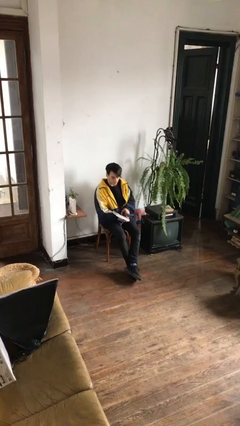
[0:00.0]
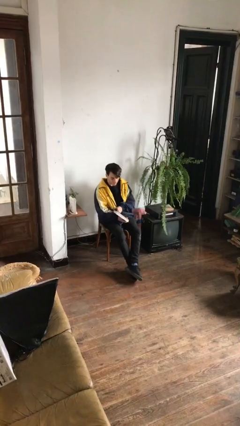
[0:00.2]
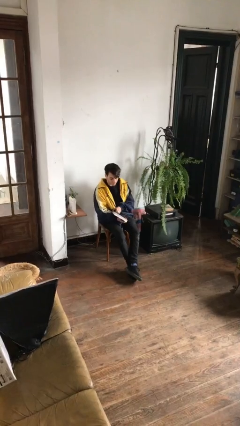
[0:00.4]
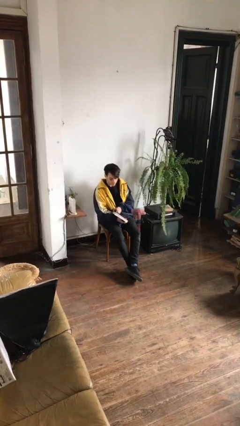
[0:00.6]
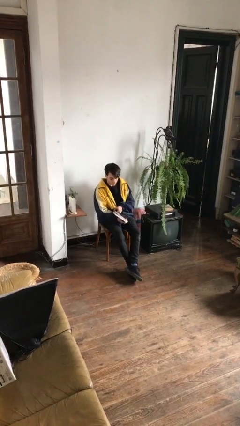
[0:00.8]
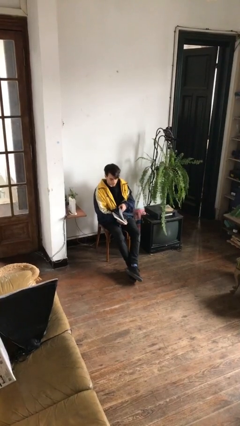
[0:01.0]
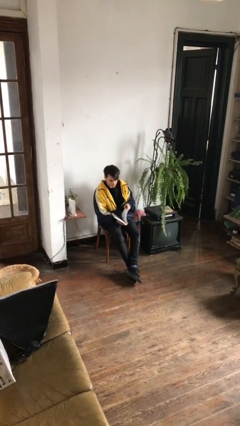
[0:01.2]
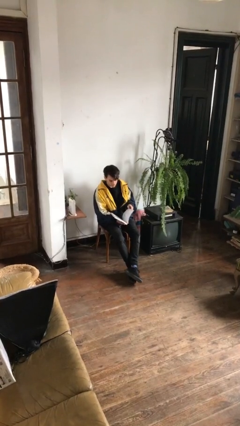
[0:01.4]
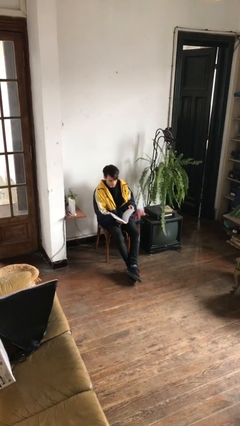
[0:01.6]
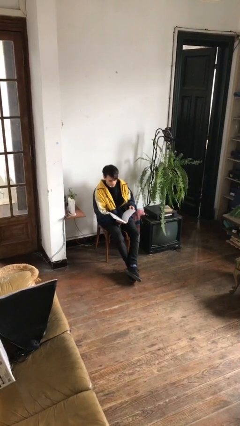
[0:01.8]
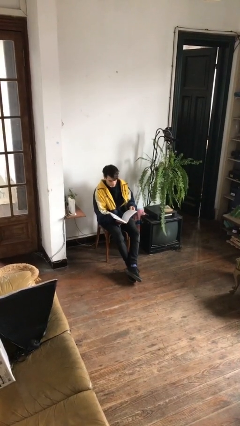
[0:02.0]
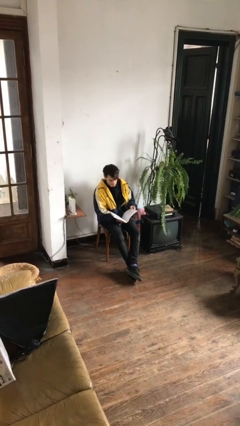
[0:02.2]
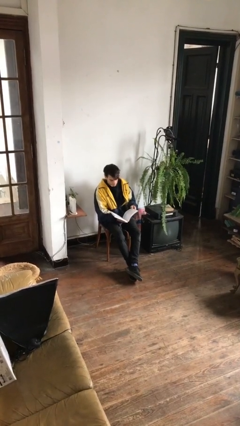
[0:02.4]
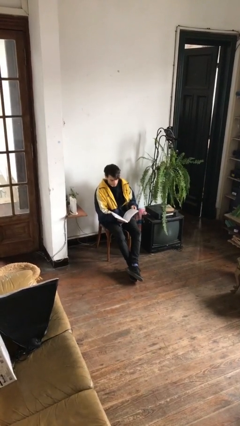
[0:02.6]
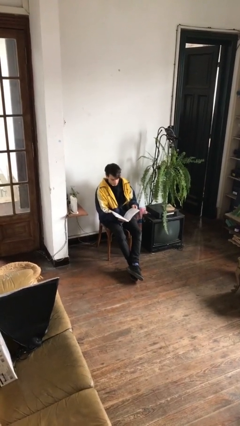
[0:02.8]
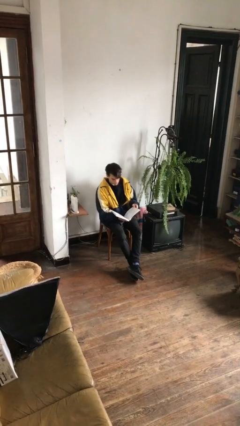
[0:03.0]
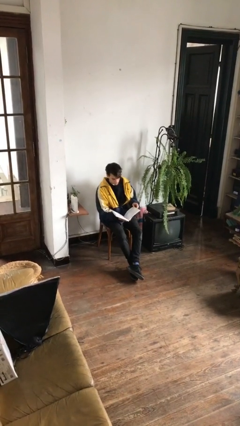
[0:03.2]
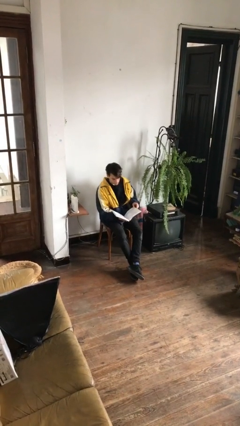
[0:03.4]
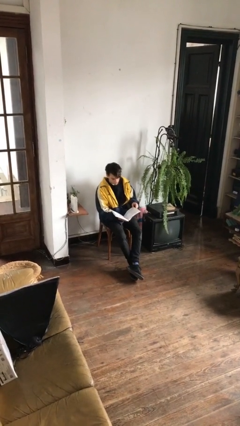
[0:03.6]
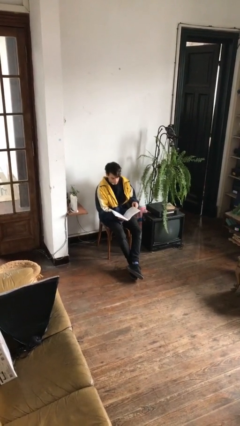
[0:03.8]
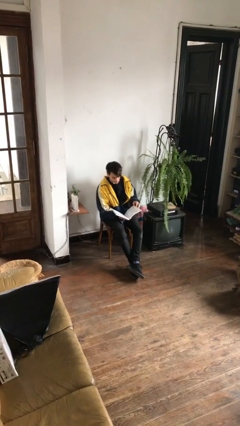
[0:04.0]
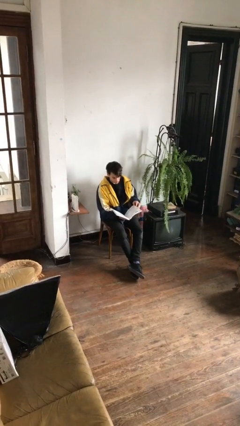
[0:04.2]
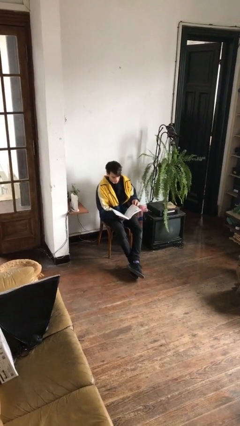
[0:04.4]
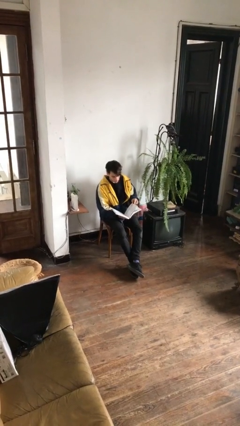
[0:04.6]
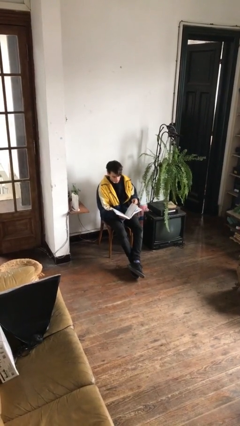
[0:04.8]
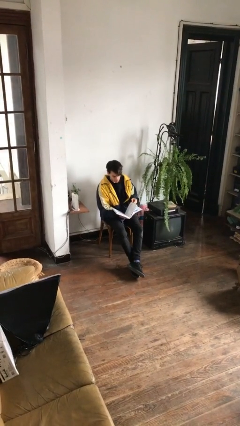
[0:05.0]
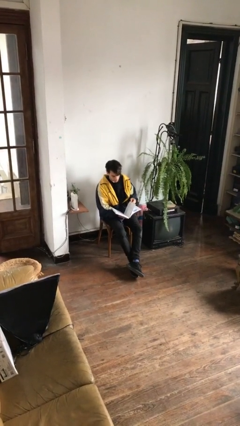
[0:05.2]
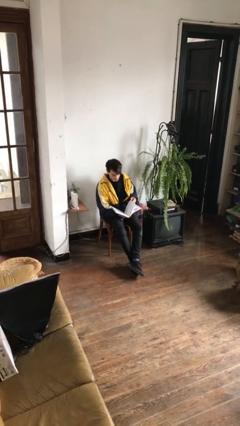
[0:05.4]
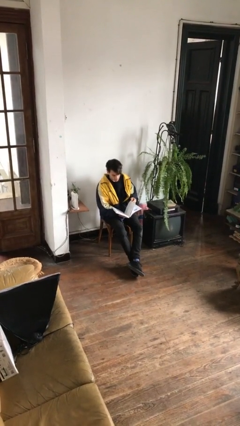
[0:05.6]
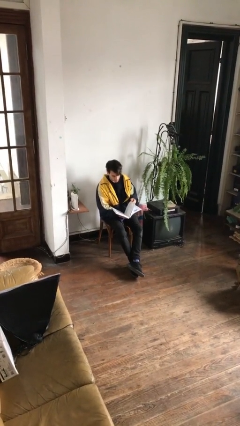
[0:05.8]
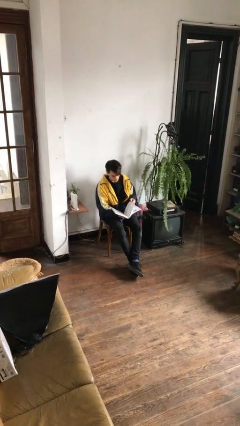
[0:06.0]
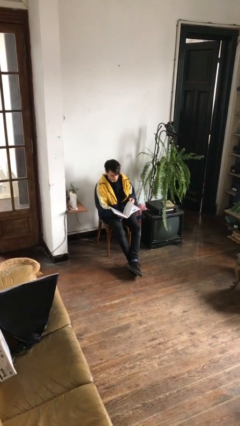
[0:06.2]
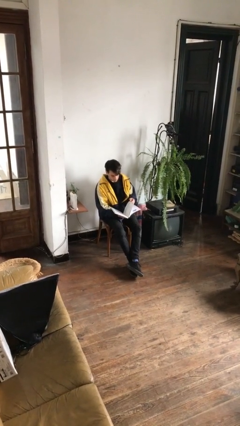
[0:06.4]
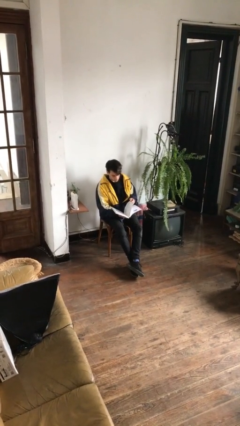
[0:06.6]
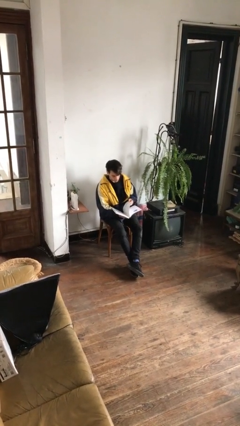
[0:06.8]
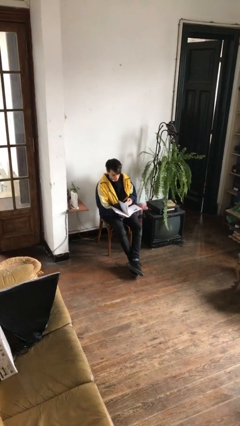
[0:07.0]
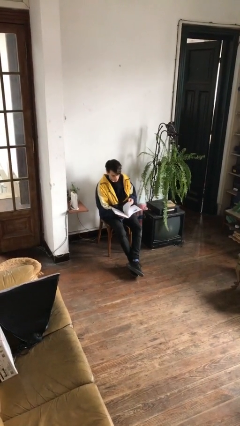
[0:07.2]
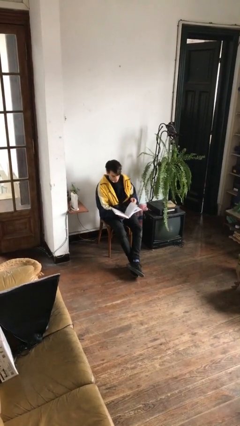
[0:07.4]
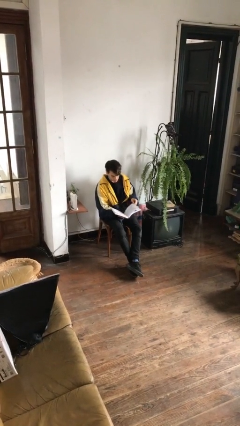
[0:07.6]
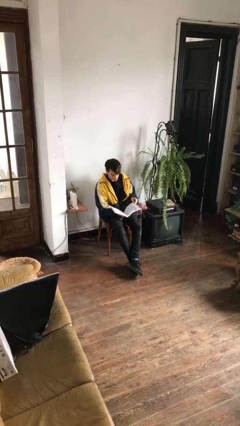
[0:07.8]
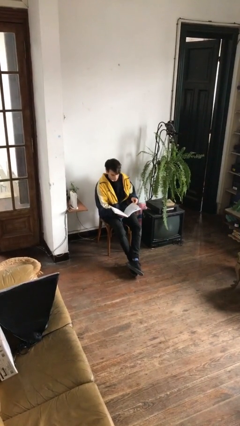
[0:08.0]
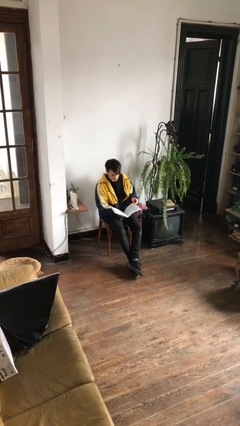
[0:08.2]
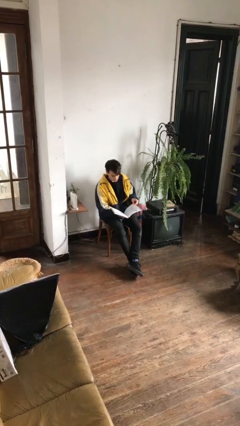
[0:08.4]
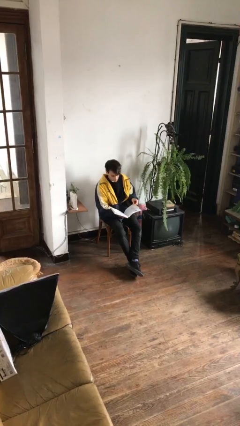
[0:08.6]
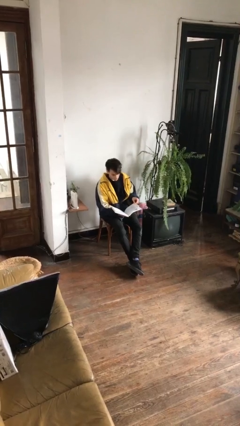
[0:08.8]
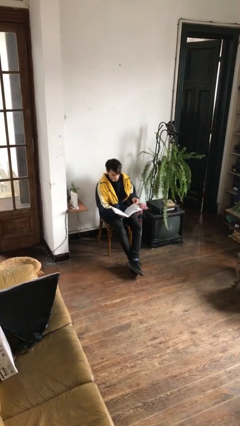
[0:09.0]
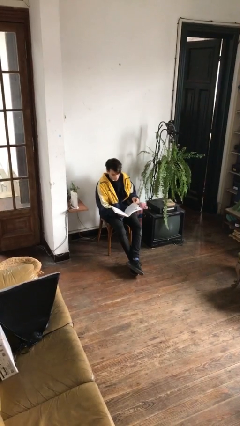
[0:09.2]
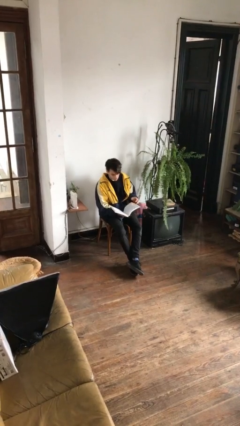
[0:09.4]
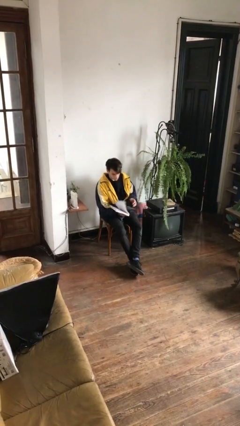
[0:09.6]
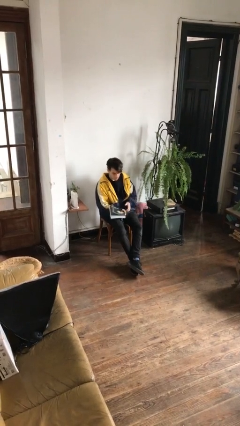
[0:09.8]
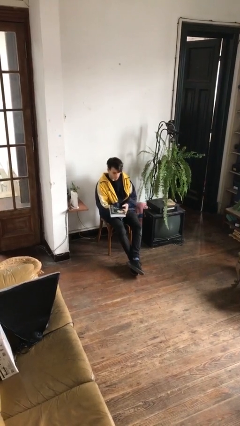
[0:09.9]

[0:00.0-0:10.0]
person reads document

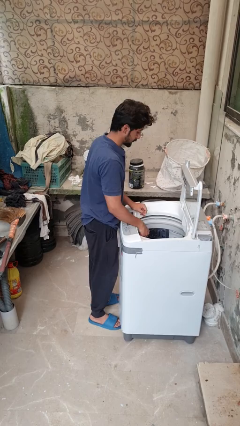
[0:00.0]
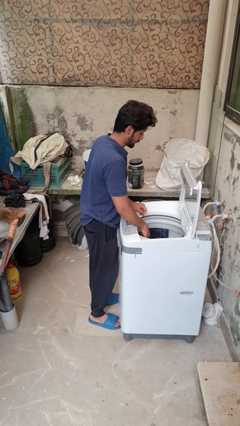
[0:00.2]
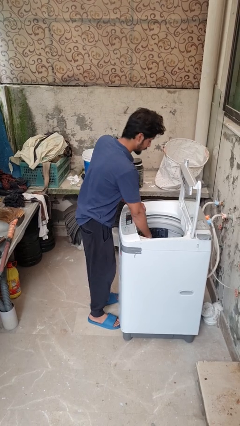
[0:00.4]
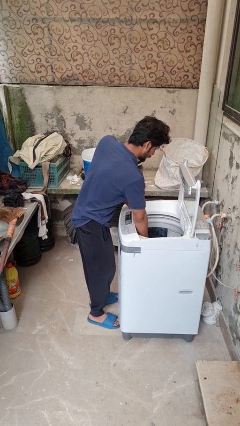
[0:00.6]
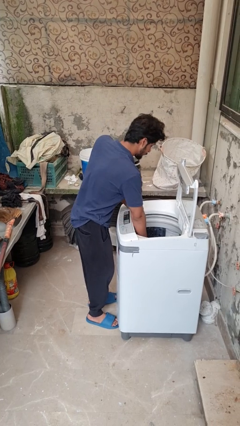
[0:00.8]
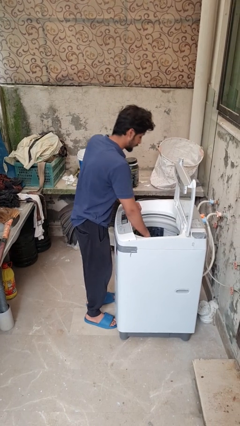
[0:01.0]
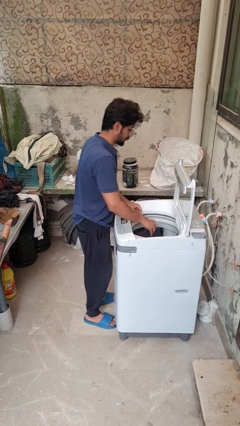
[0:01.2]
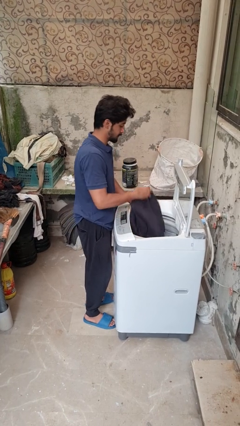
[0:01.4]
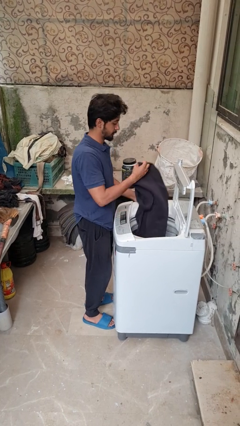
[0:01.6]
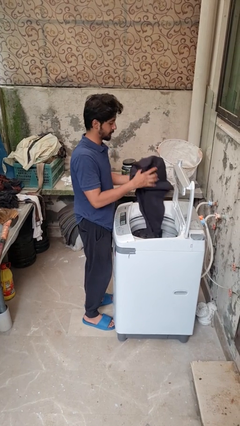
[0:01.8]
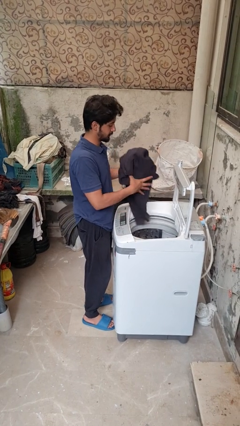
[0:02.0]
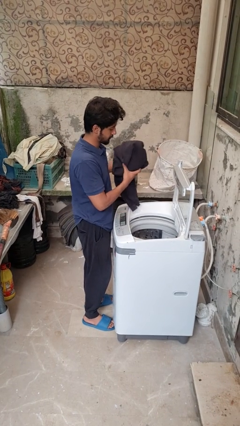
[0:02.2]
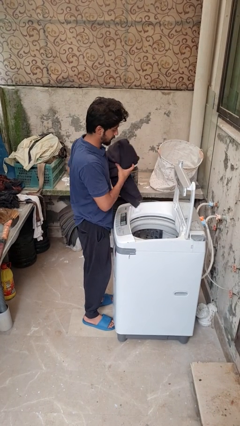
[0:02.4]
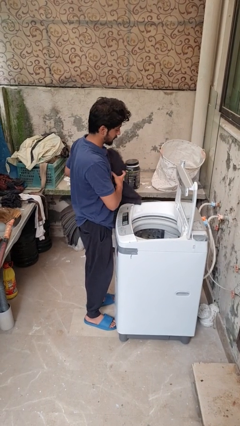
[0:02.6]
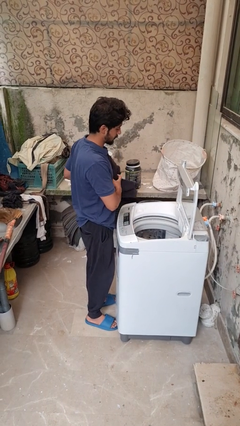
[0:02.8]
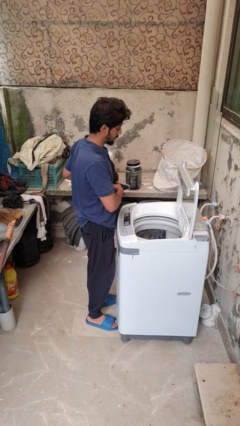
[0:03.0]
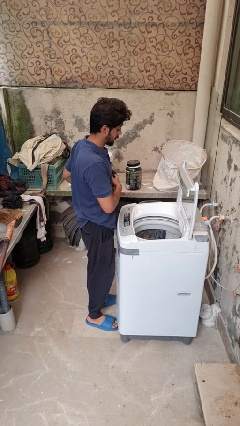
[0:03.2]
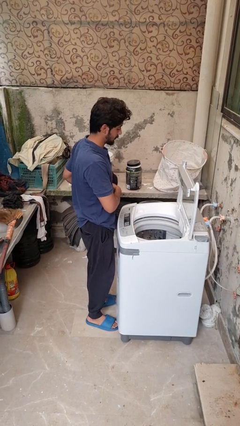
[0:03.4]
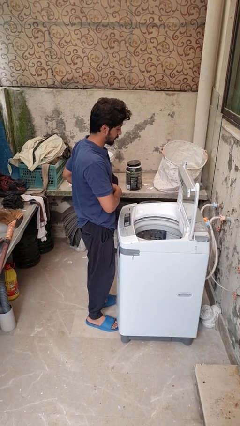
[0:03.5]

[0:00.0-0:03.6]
person unloads dryer

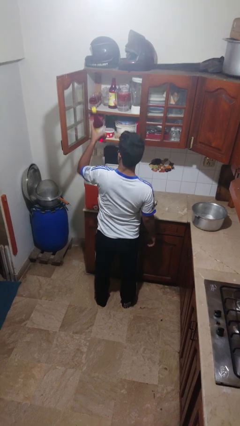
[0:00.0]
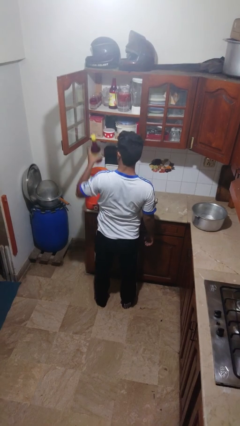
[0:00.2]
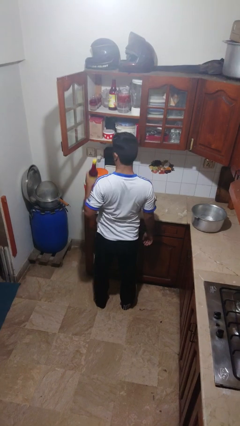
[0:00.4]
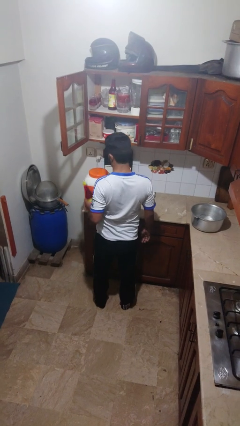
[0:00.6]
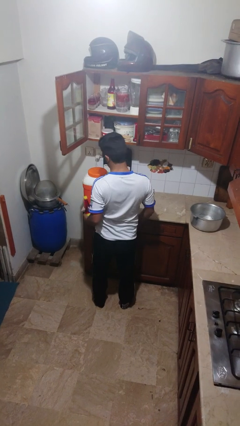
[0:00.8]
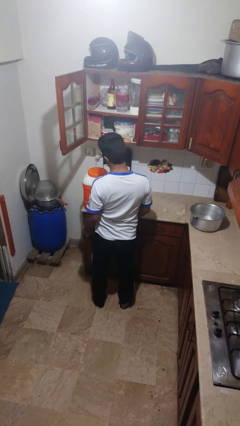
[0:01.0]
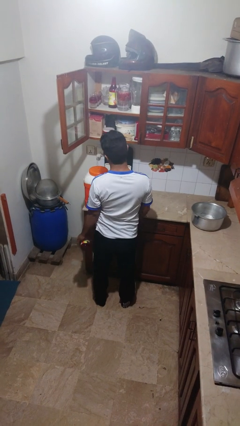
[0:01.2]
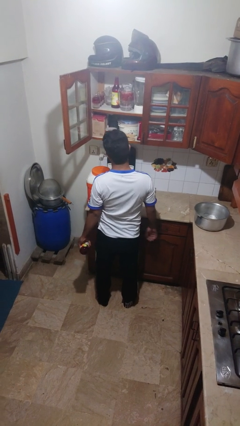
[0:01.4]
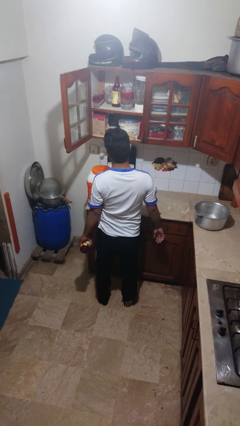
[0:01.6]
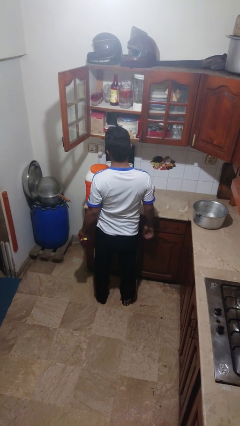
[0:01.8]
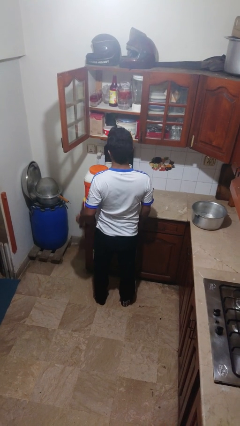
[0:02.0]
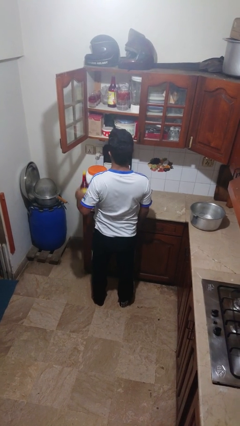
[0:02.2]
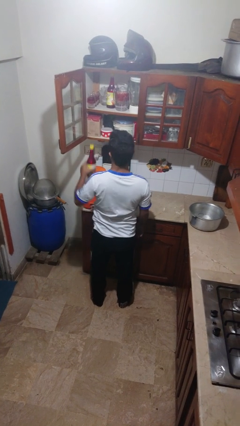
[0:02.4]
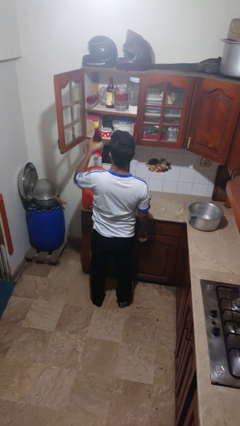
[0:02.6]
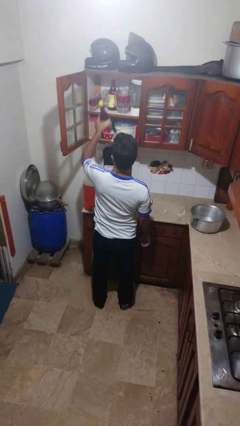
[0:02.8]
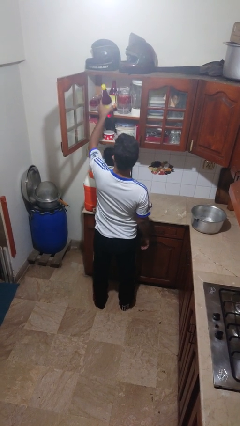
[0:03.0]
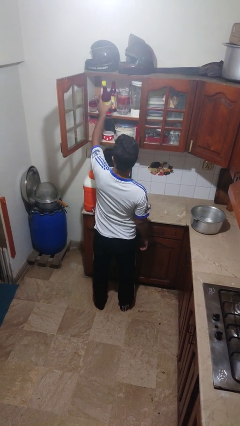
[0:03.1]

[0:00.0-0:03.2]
person puts down object into cabinet

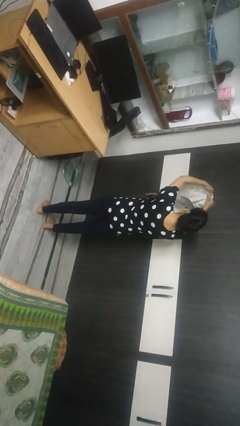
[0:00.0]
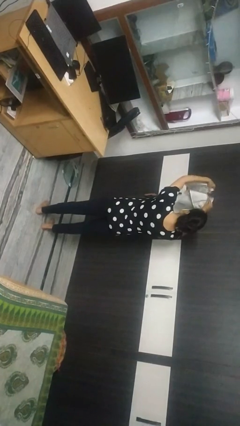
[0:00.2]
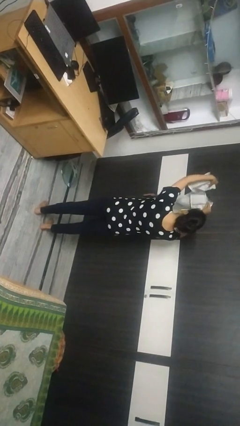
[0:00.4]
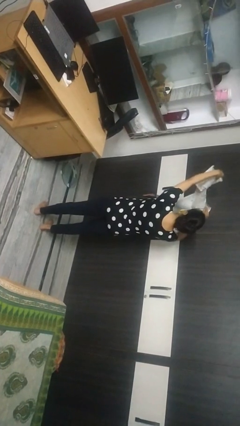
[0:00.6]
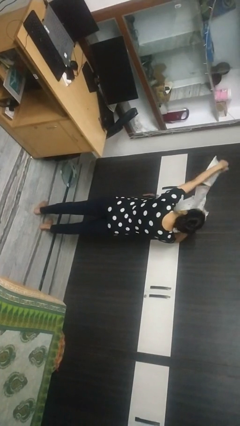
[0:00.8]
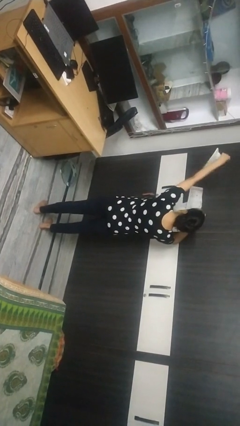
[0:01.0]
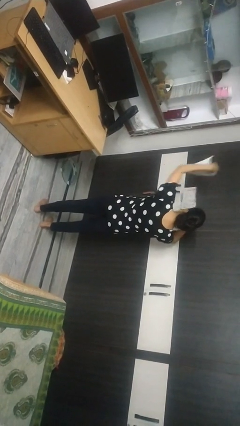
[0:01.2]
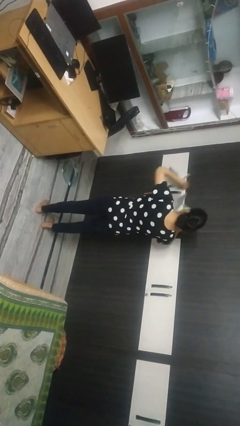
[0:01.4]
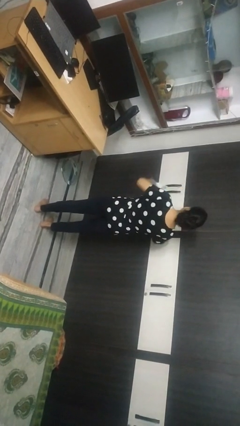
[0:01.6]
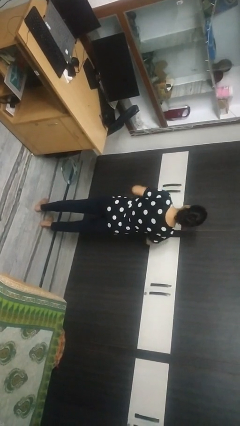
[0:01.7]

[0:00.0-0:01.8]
person tears paper
